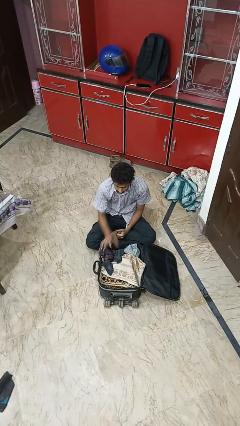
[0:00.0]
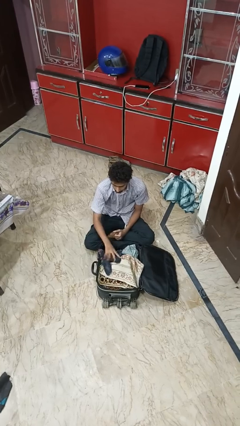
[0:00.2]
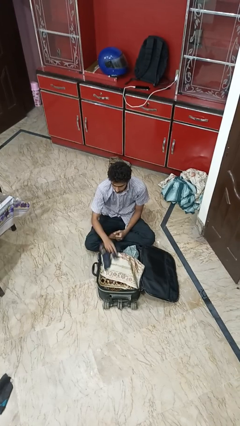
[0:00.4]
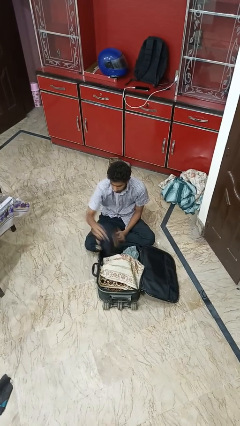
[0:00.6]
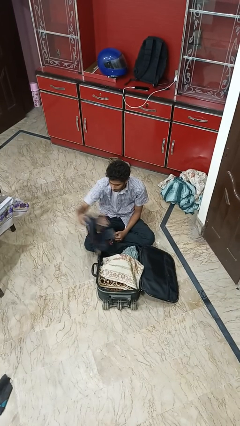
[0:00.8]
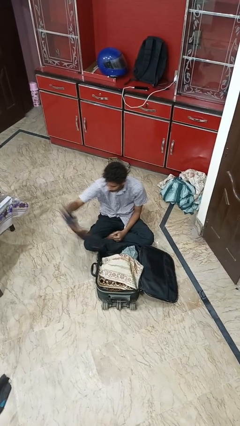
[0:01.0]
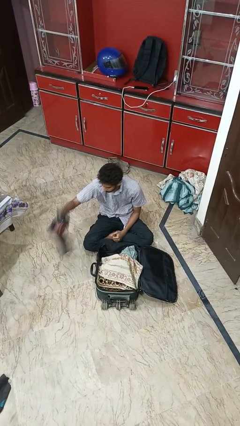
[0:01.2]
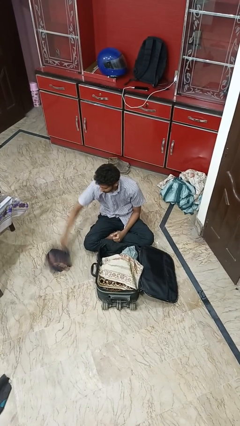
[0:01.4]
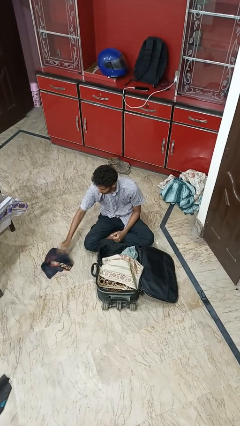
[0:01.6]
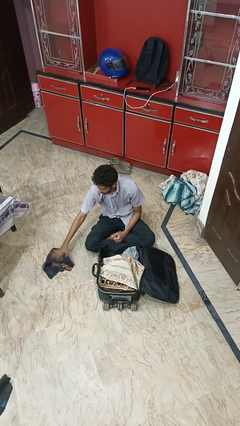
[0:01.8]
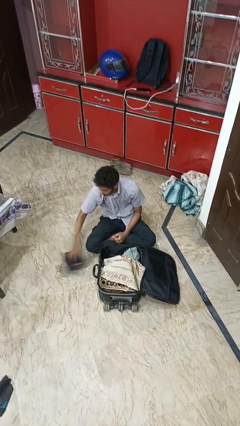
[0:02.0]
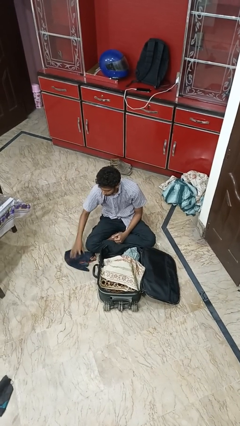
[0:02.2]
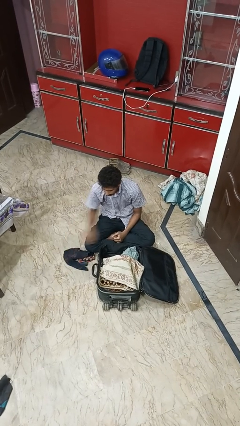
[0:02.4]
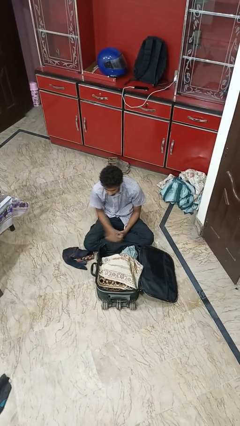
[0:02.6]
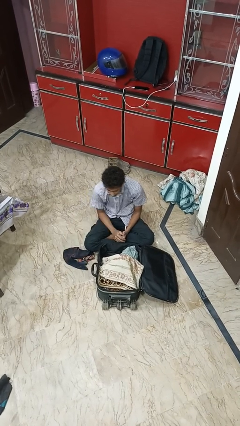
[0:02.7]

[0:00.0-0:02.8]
person unloads clothes from suitcase

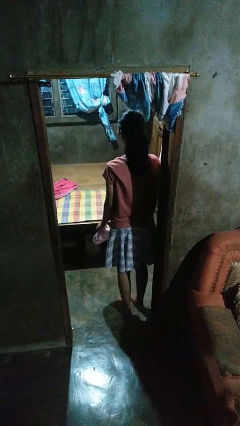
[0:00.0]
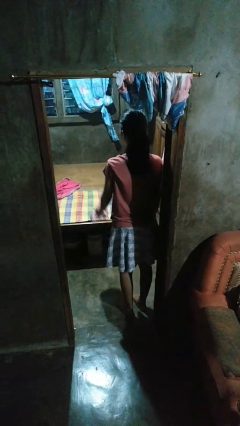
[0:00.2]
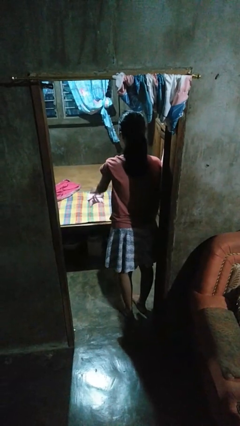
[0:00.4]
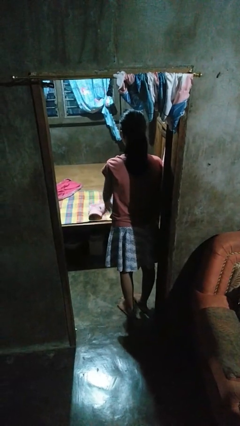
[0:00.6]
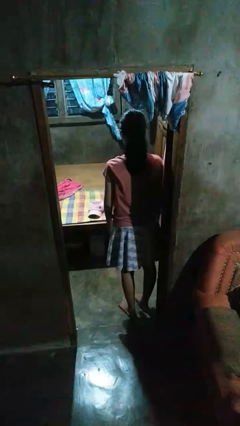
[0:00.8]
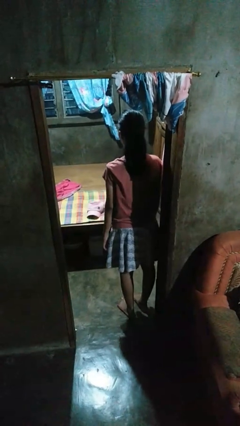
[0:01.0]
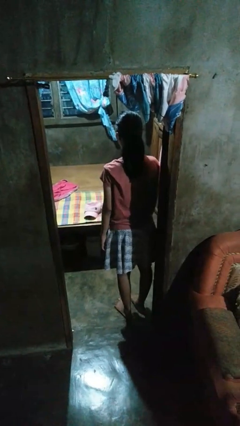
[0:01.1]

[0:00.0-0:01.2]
person throws object on bed

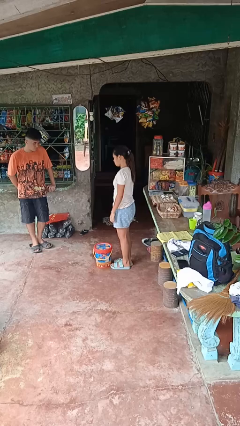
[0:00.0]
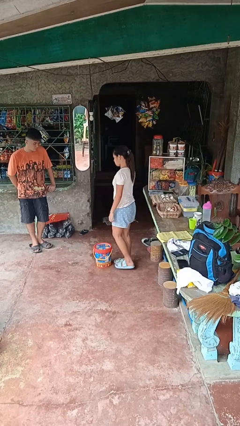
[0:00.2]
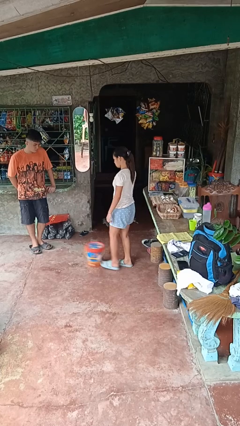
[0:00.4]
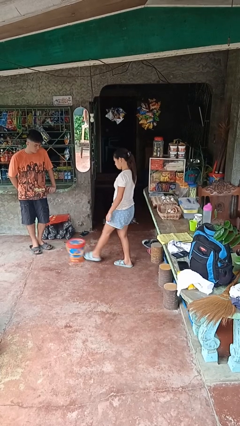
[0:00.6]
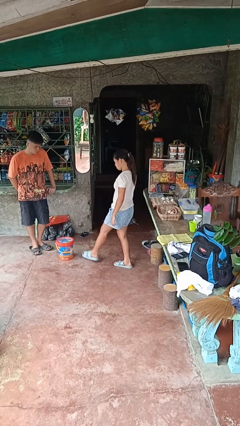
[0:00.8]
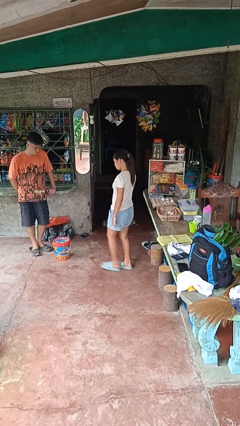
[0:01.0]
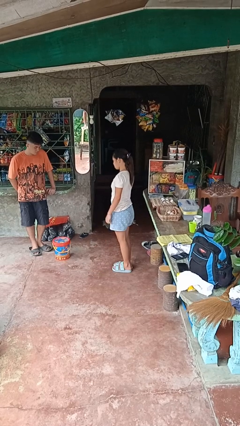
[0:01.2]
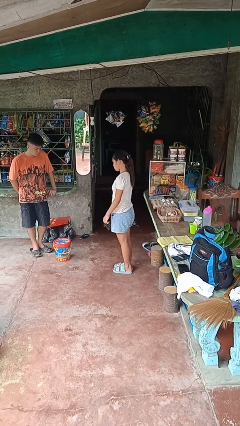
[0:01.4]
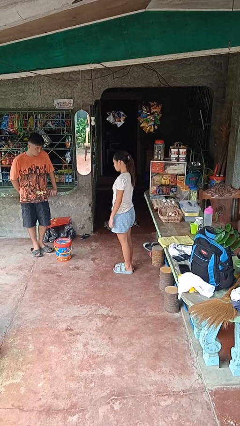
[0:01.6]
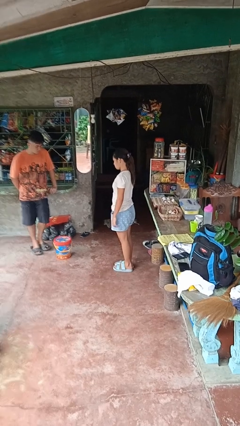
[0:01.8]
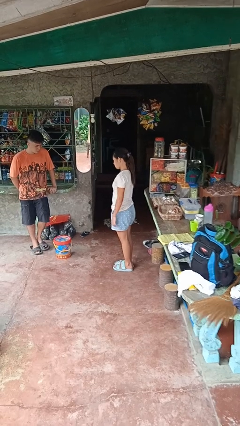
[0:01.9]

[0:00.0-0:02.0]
person kicks object to person

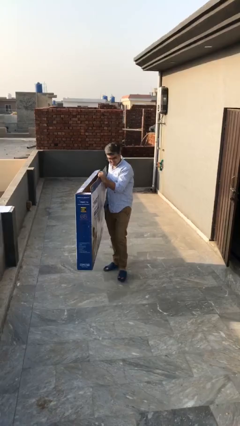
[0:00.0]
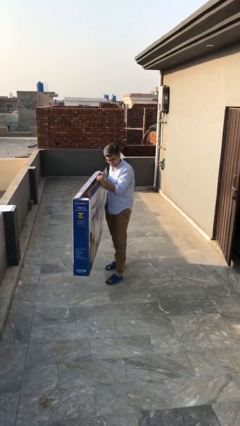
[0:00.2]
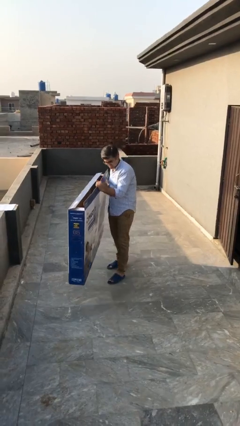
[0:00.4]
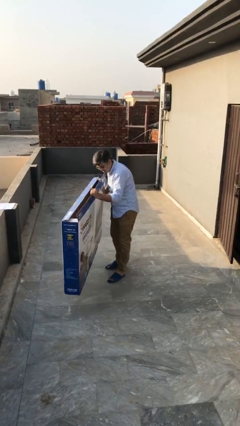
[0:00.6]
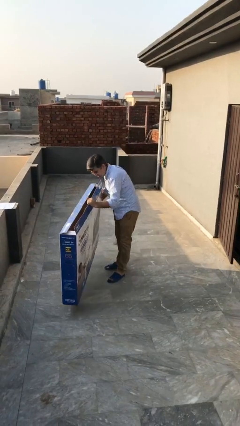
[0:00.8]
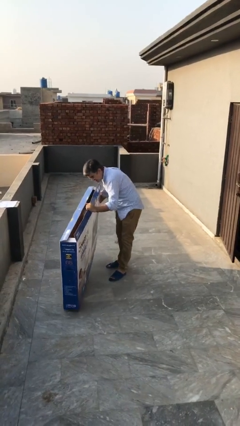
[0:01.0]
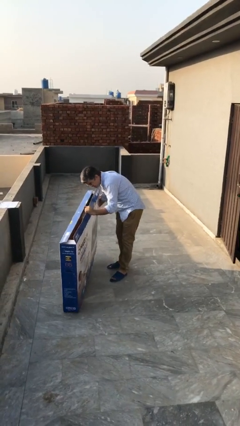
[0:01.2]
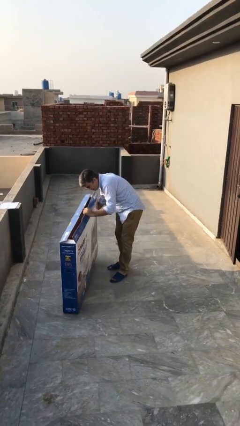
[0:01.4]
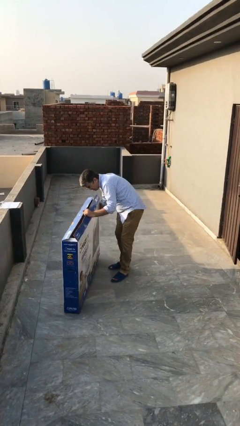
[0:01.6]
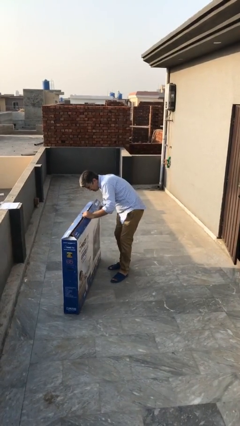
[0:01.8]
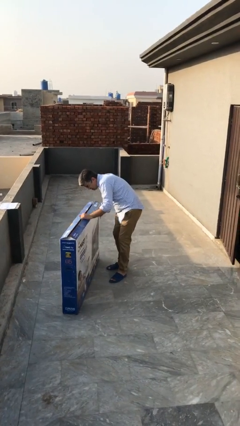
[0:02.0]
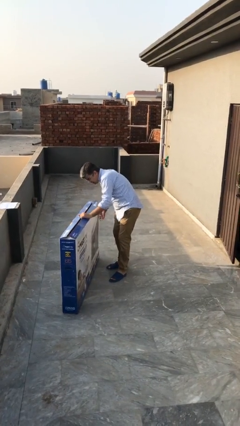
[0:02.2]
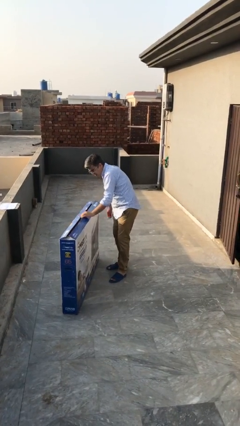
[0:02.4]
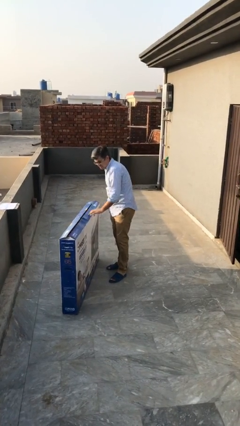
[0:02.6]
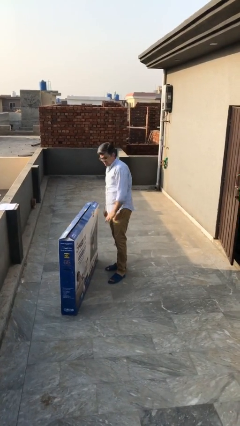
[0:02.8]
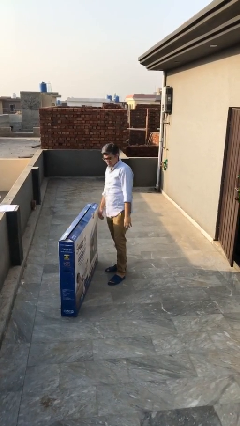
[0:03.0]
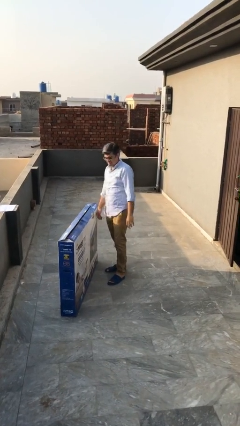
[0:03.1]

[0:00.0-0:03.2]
person puts down object on floor

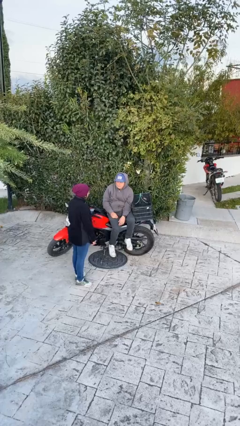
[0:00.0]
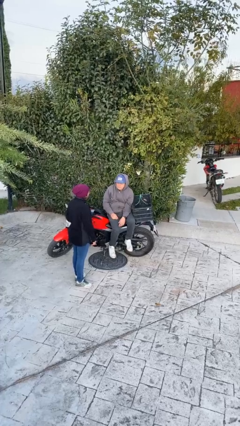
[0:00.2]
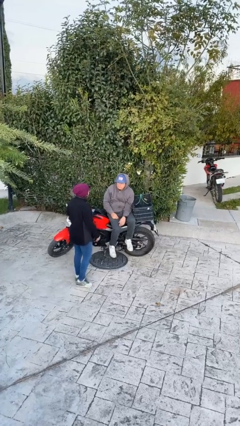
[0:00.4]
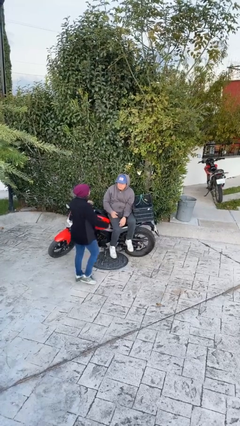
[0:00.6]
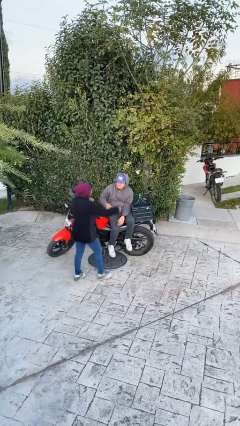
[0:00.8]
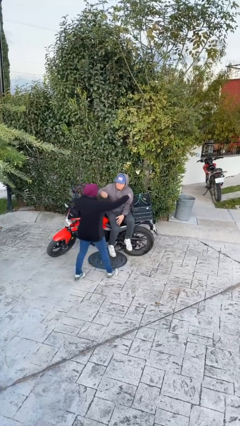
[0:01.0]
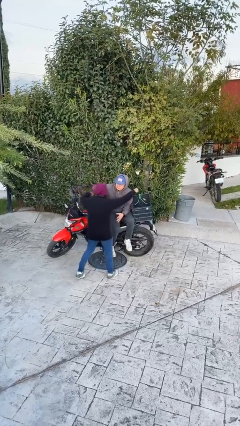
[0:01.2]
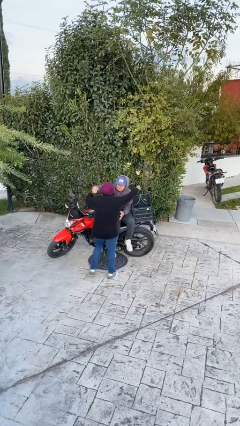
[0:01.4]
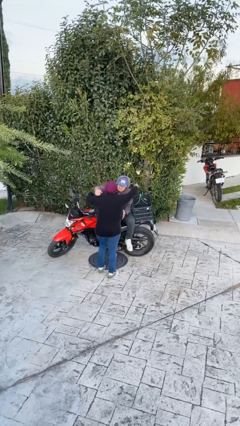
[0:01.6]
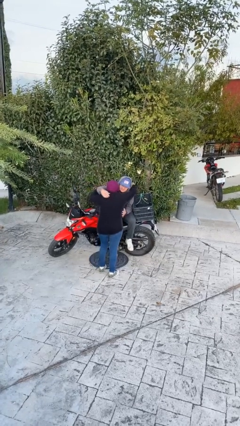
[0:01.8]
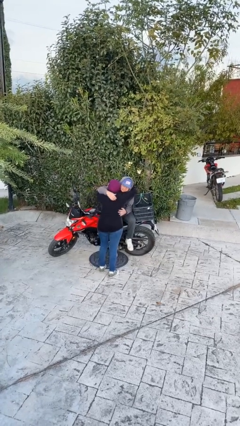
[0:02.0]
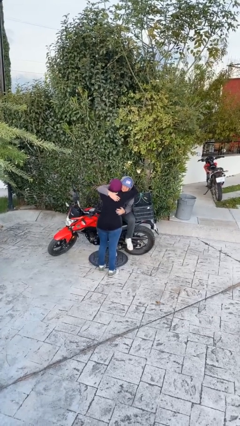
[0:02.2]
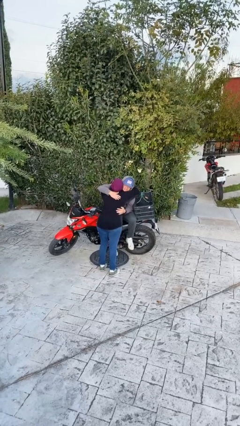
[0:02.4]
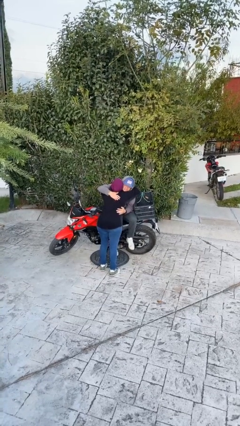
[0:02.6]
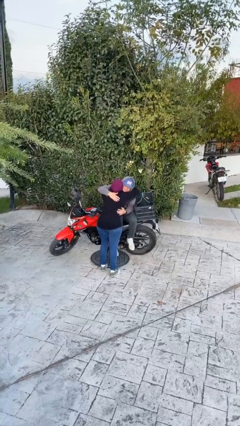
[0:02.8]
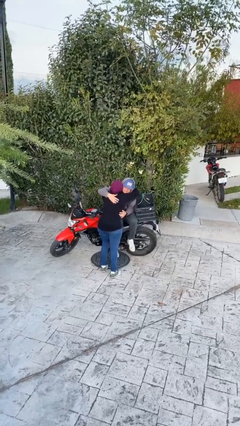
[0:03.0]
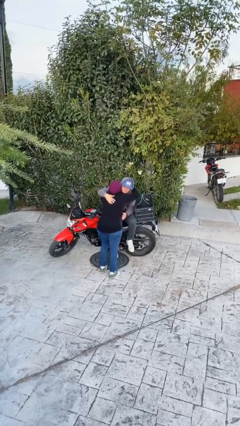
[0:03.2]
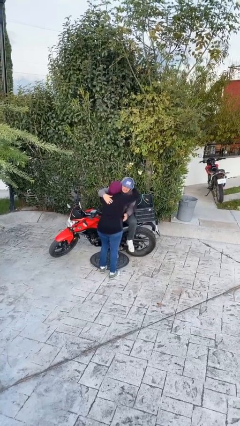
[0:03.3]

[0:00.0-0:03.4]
person embraces person

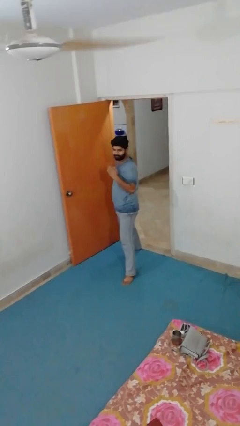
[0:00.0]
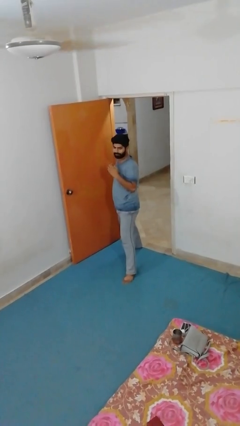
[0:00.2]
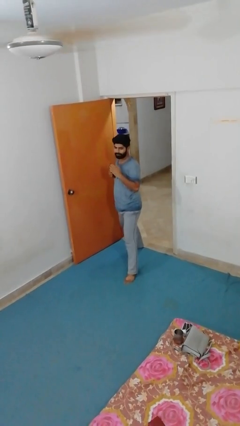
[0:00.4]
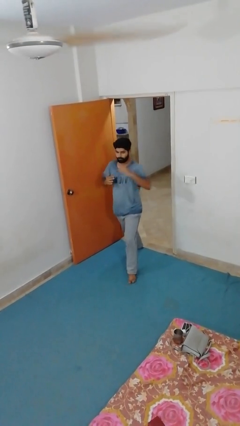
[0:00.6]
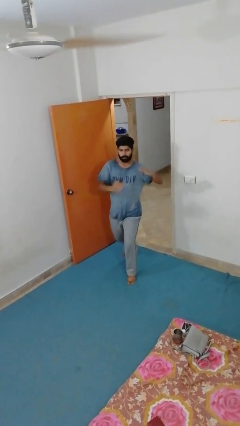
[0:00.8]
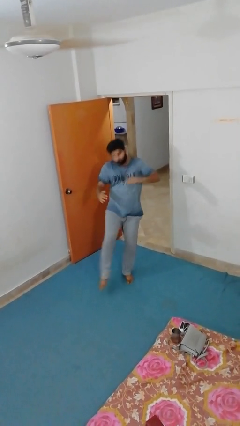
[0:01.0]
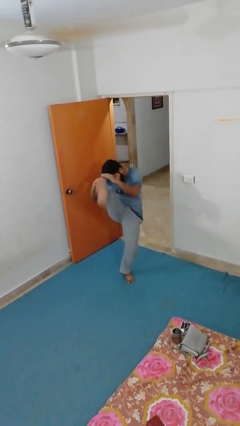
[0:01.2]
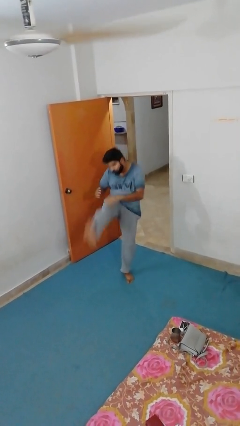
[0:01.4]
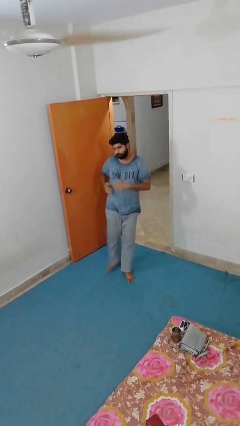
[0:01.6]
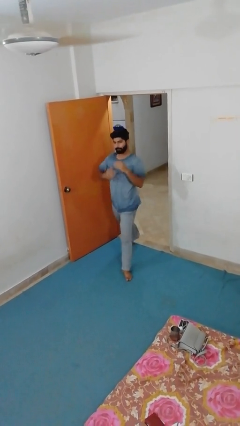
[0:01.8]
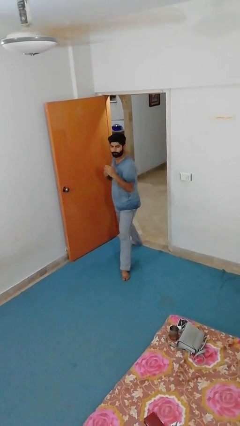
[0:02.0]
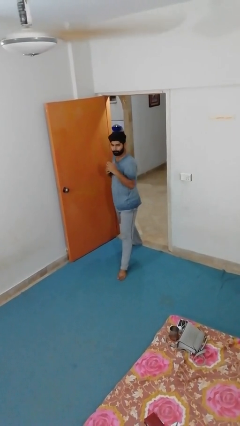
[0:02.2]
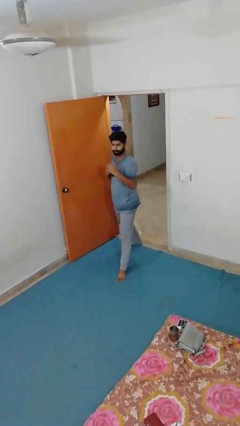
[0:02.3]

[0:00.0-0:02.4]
person karate kicks

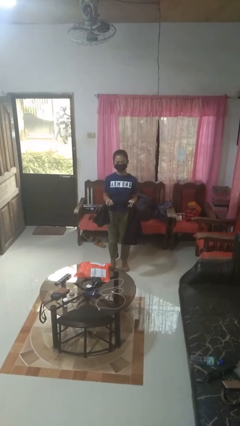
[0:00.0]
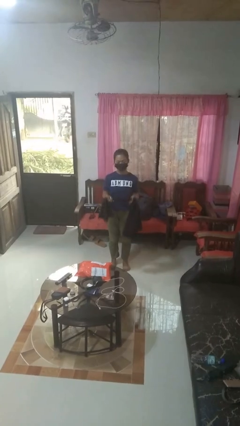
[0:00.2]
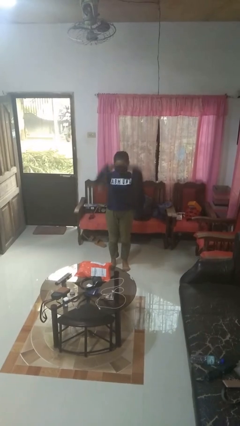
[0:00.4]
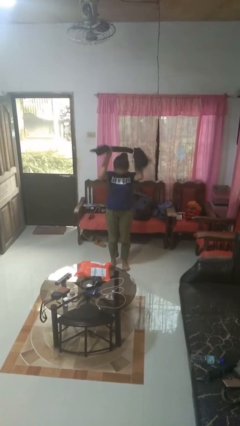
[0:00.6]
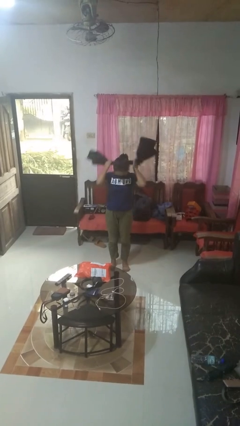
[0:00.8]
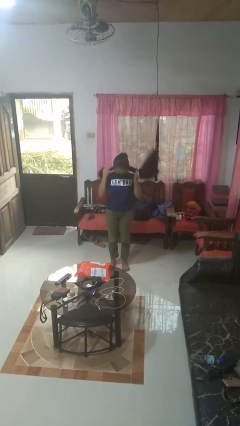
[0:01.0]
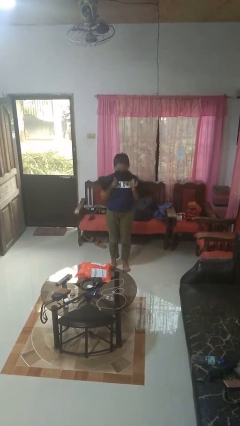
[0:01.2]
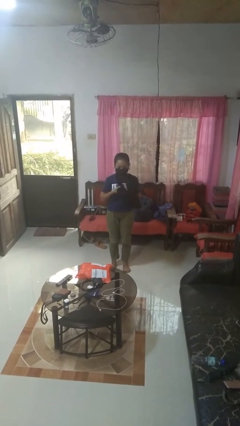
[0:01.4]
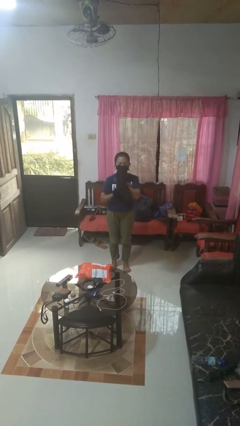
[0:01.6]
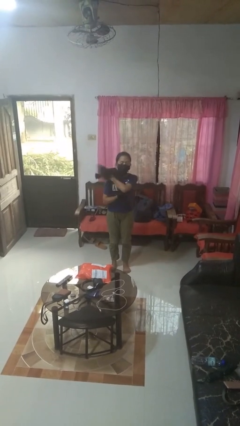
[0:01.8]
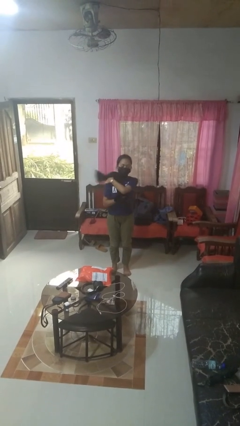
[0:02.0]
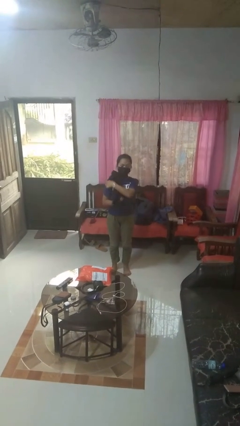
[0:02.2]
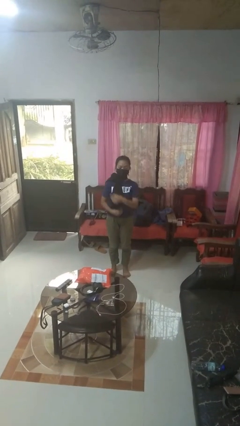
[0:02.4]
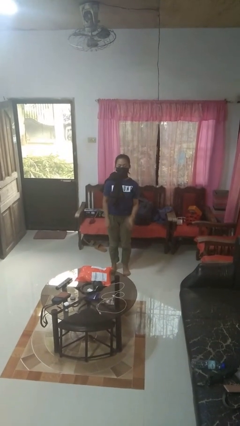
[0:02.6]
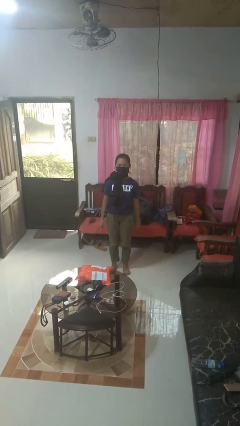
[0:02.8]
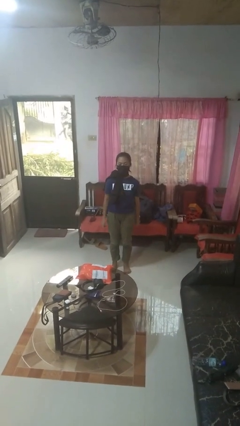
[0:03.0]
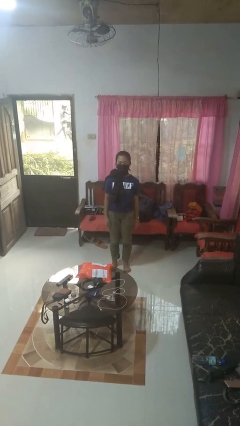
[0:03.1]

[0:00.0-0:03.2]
person puts on scarf
